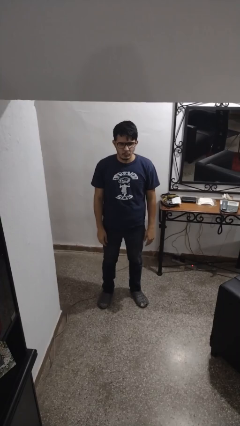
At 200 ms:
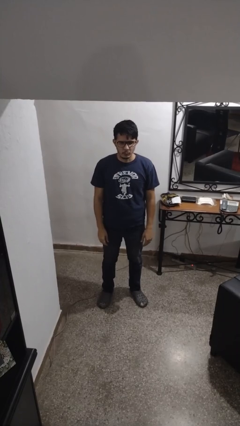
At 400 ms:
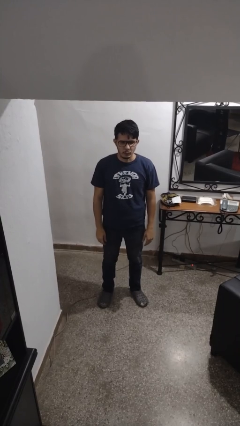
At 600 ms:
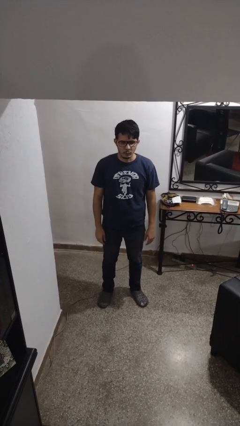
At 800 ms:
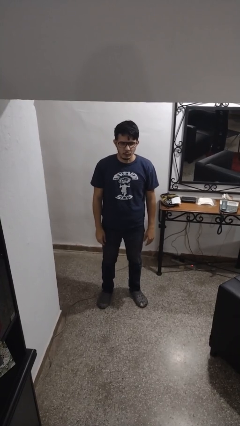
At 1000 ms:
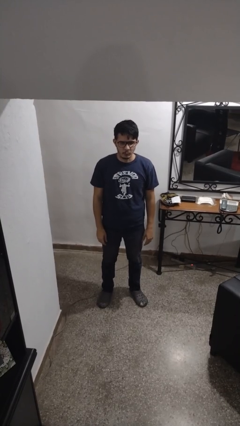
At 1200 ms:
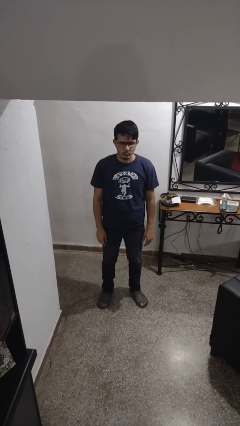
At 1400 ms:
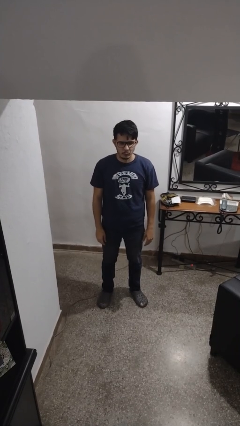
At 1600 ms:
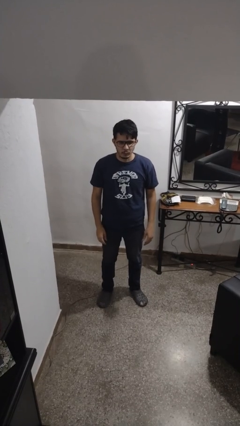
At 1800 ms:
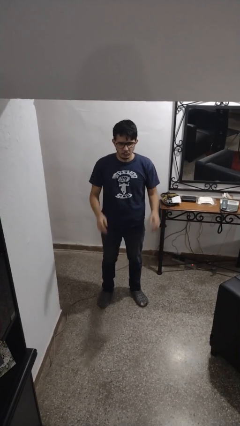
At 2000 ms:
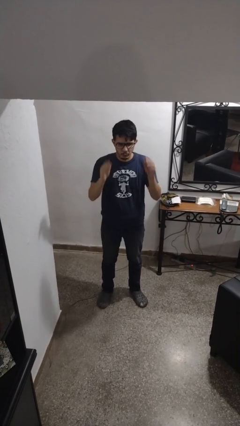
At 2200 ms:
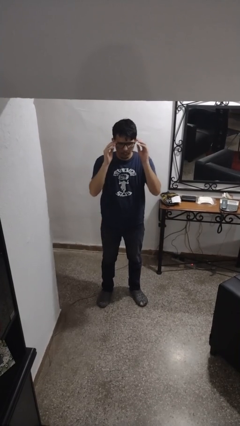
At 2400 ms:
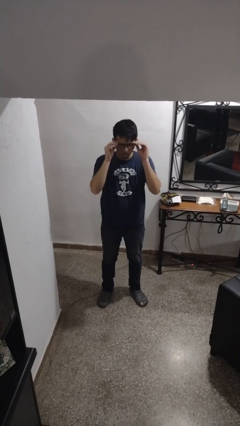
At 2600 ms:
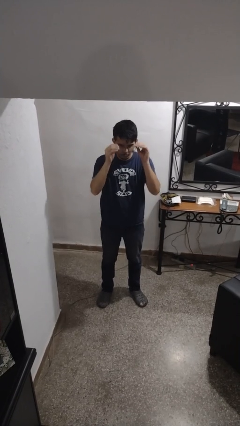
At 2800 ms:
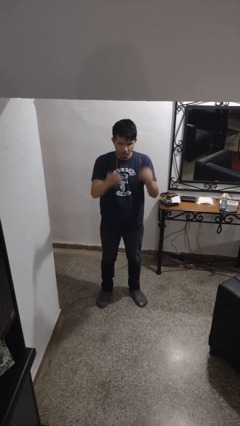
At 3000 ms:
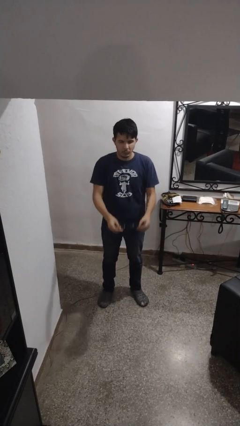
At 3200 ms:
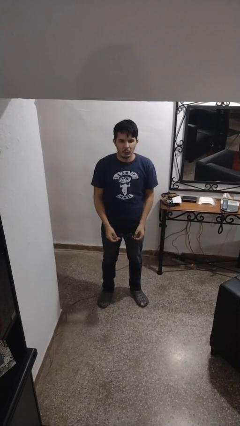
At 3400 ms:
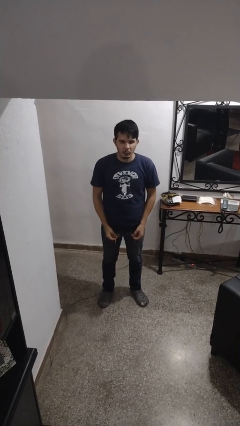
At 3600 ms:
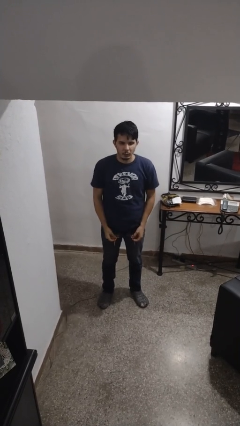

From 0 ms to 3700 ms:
person takes off glasses

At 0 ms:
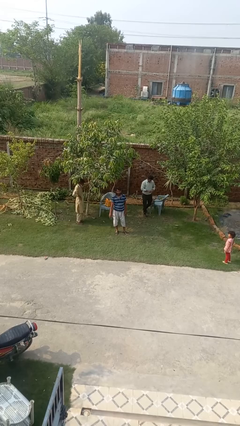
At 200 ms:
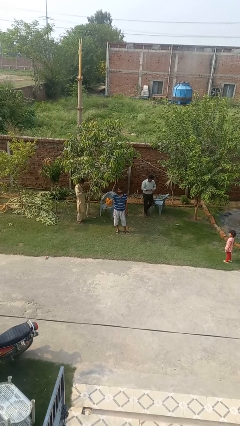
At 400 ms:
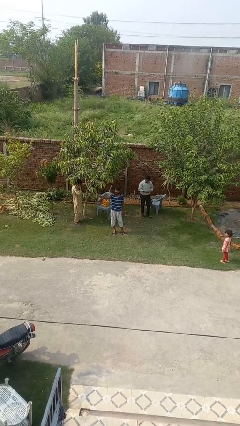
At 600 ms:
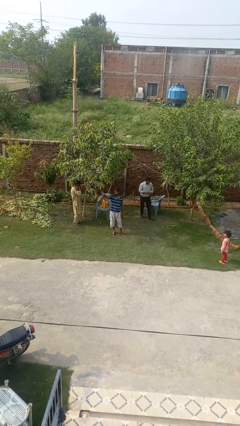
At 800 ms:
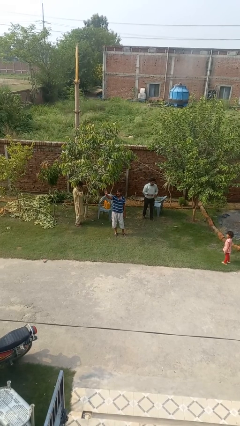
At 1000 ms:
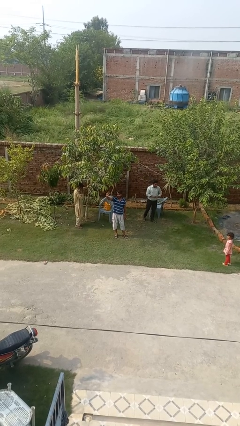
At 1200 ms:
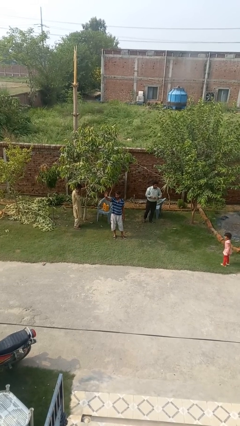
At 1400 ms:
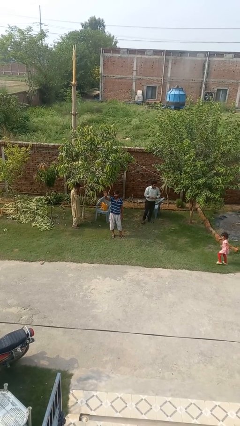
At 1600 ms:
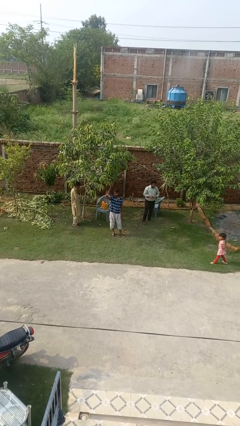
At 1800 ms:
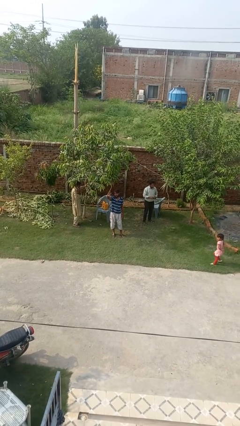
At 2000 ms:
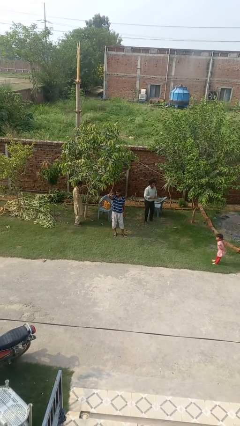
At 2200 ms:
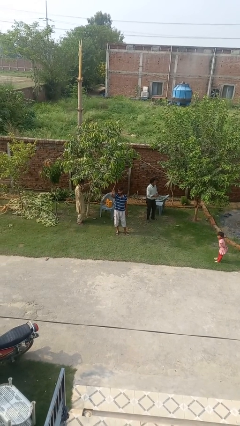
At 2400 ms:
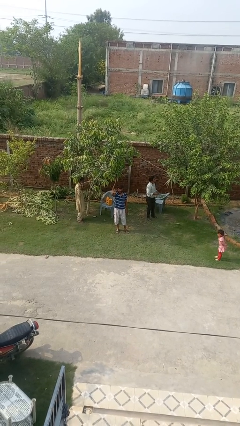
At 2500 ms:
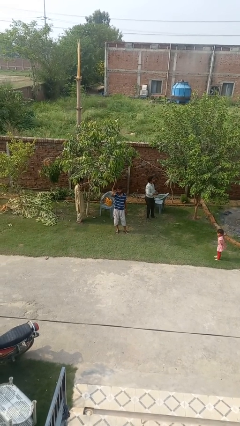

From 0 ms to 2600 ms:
person waves at person

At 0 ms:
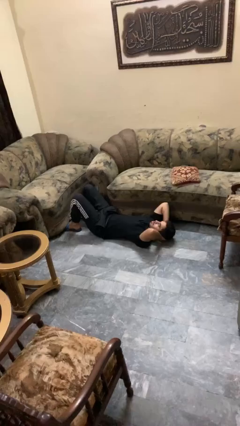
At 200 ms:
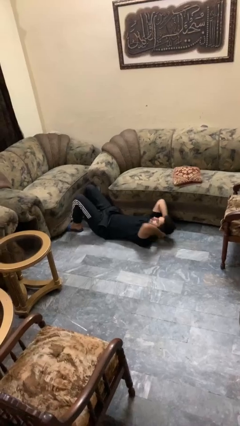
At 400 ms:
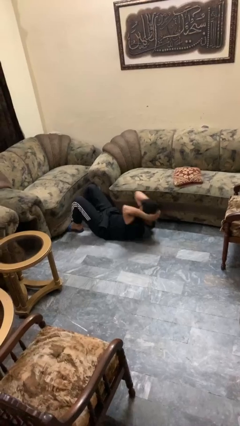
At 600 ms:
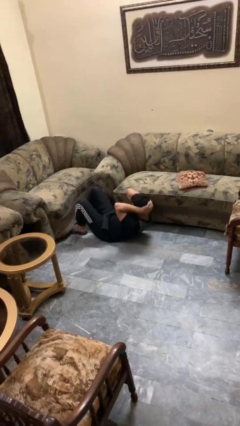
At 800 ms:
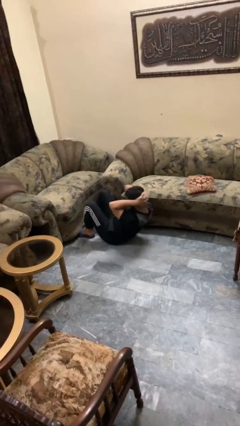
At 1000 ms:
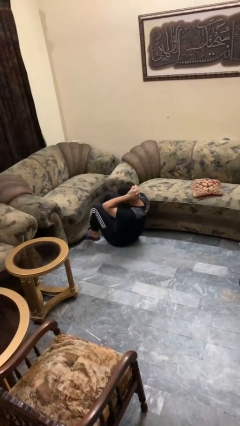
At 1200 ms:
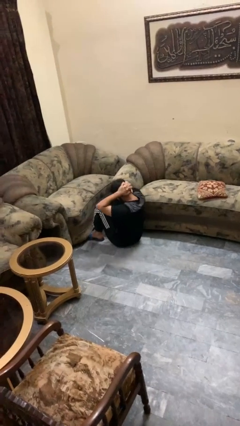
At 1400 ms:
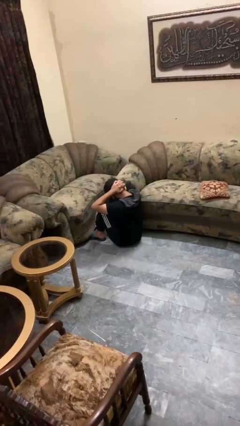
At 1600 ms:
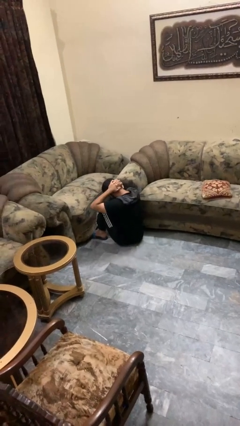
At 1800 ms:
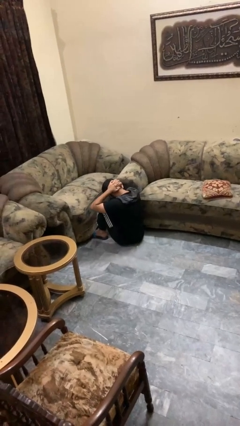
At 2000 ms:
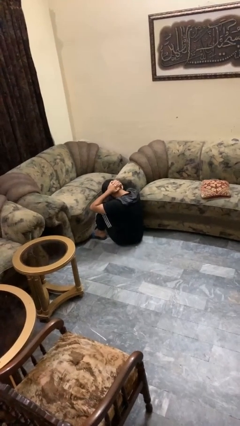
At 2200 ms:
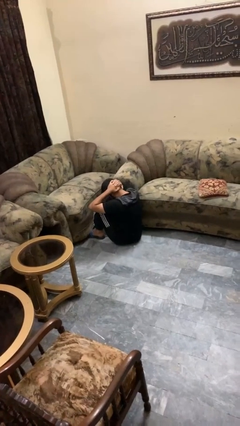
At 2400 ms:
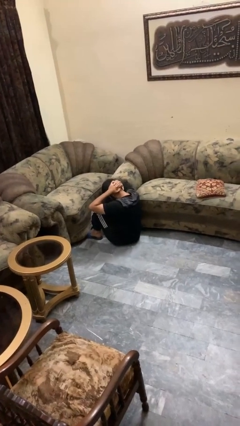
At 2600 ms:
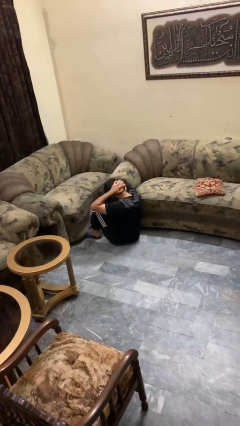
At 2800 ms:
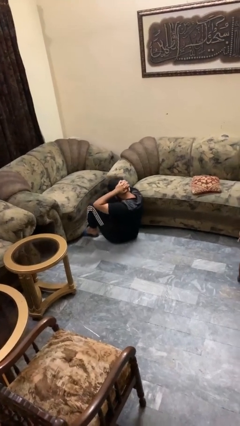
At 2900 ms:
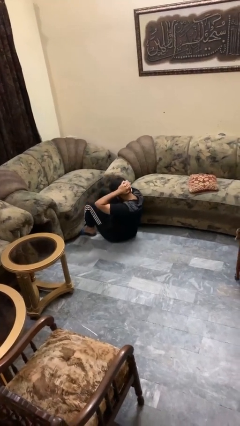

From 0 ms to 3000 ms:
person exercises with situp

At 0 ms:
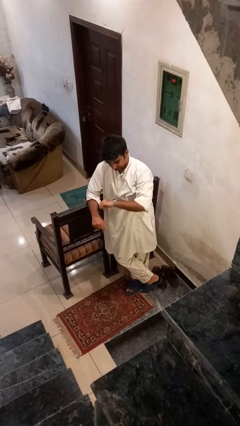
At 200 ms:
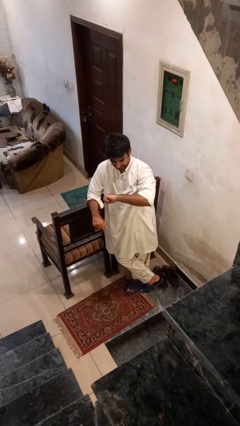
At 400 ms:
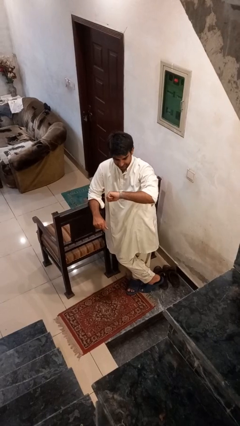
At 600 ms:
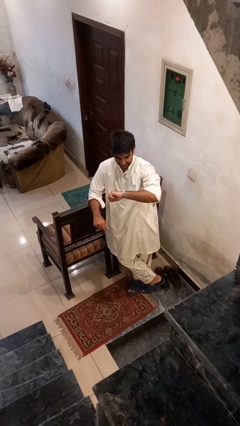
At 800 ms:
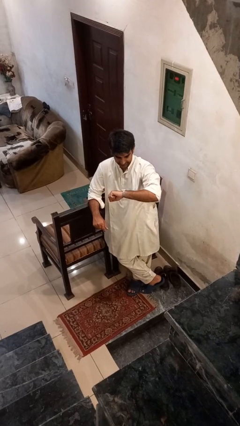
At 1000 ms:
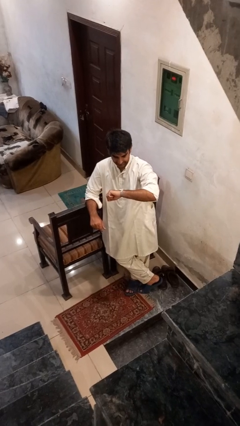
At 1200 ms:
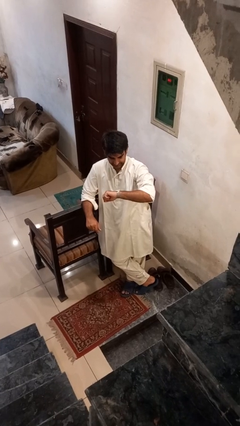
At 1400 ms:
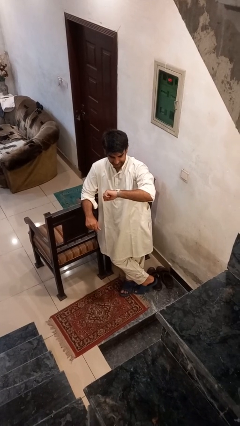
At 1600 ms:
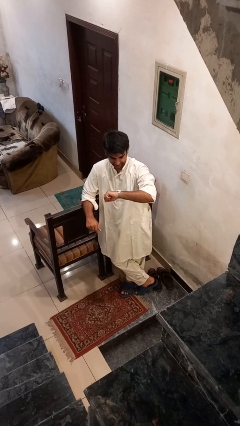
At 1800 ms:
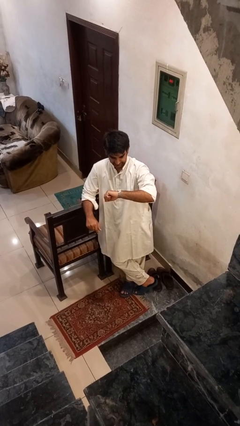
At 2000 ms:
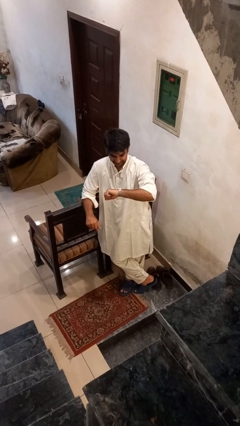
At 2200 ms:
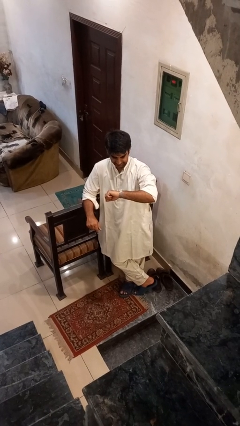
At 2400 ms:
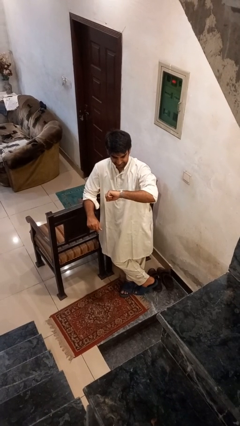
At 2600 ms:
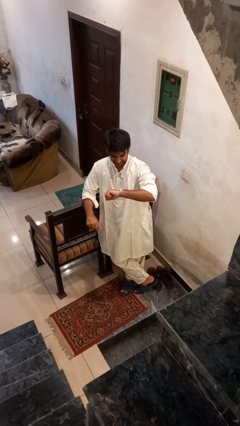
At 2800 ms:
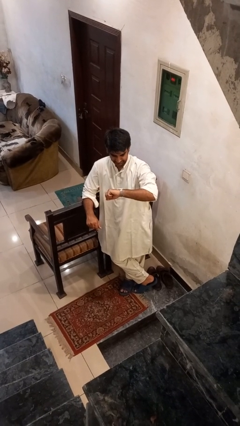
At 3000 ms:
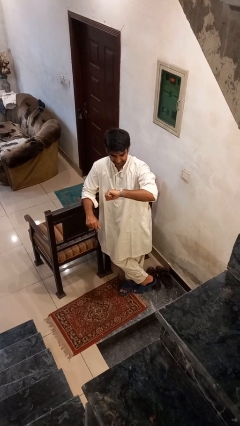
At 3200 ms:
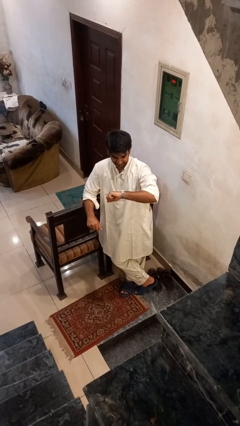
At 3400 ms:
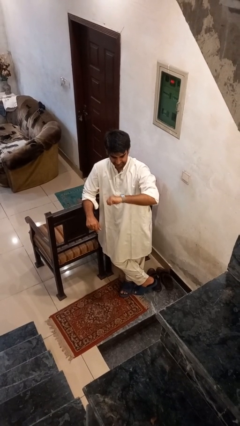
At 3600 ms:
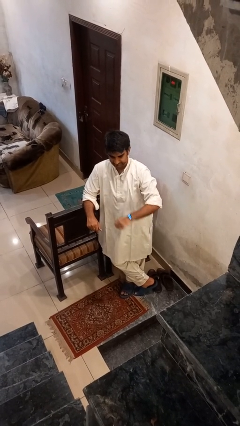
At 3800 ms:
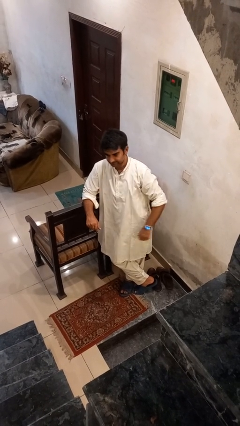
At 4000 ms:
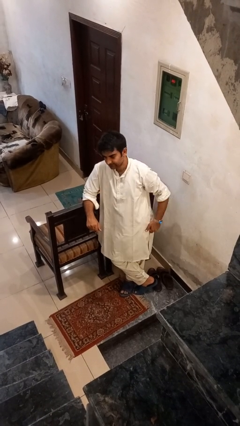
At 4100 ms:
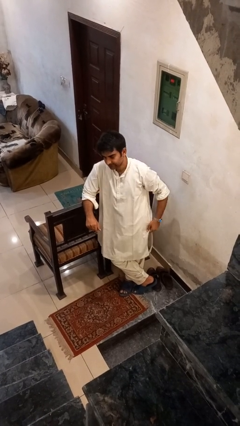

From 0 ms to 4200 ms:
person looks at wristwatch

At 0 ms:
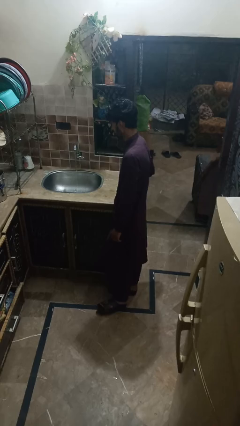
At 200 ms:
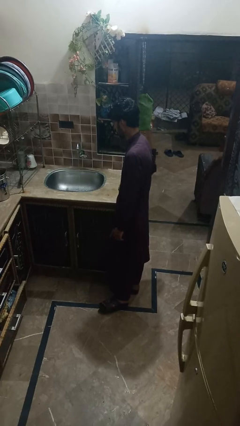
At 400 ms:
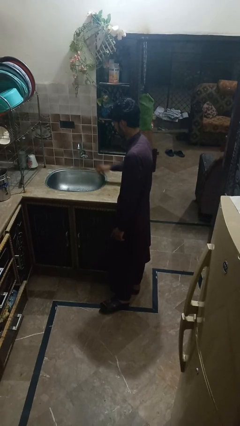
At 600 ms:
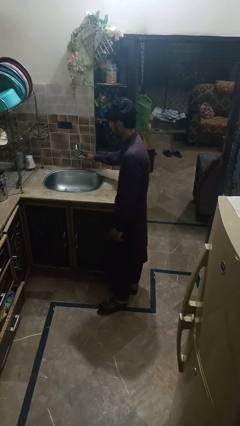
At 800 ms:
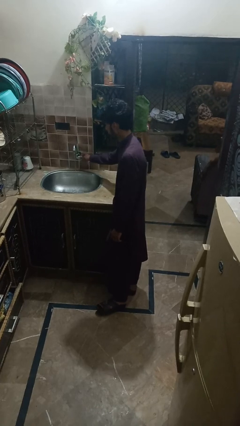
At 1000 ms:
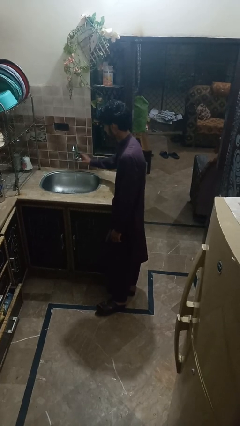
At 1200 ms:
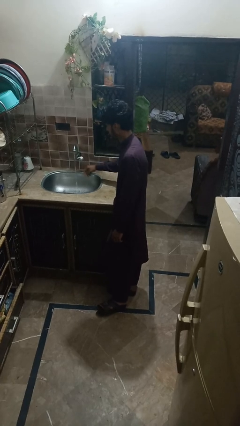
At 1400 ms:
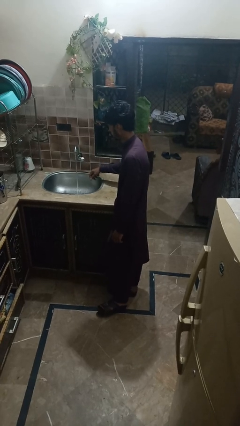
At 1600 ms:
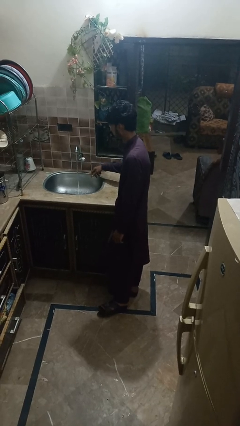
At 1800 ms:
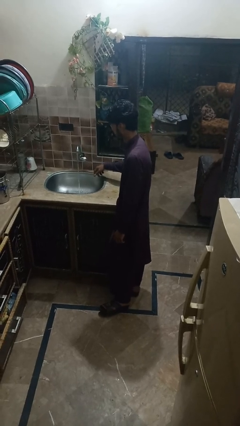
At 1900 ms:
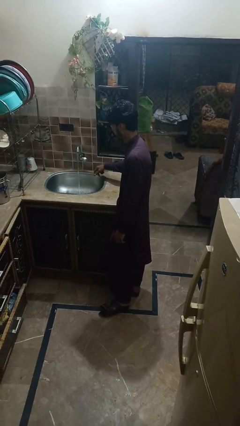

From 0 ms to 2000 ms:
person opens dishwasher

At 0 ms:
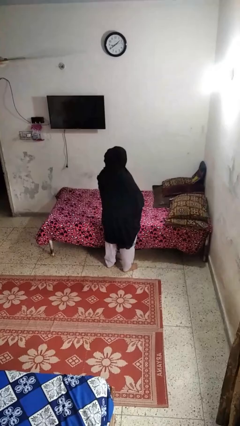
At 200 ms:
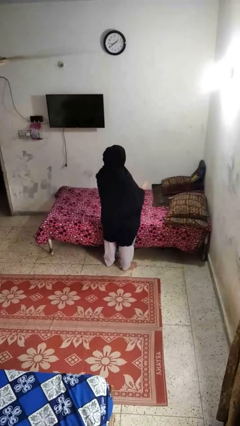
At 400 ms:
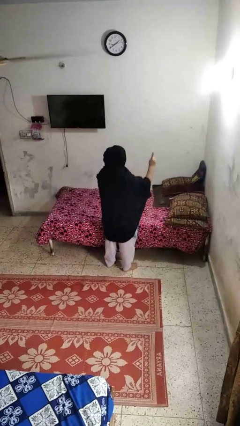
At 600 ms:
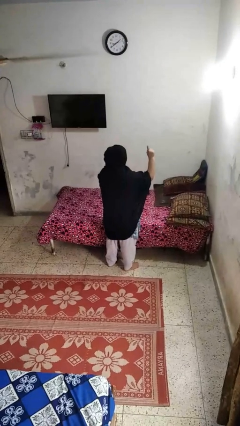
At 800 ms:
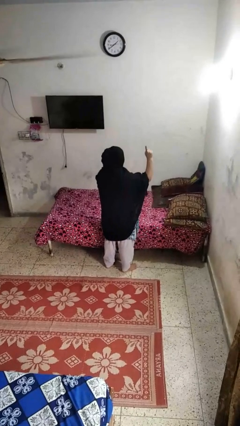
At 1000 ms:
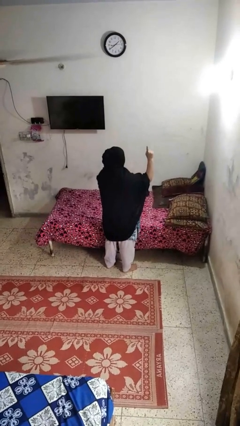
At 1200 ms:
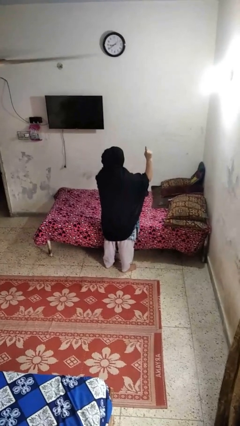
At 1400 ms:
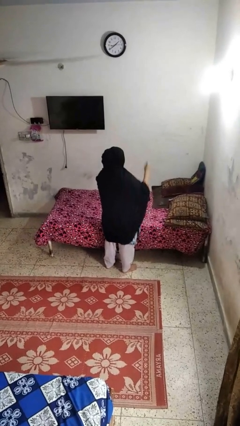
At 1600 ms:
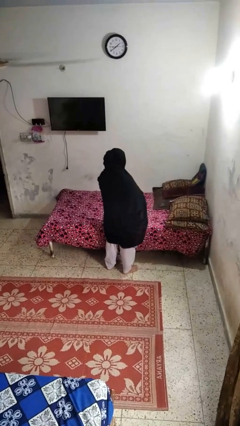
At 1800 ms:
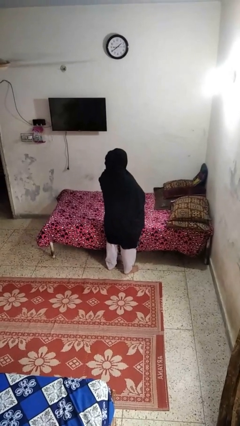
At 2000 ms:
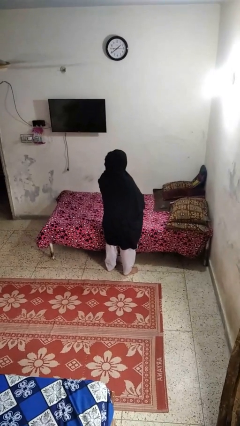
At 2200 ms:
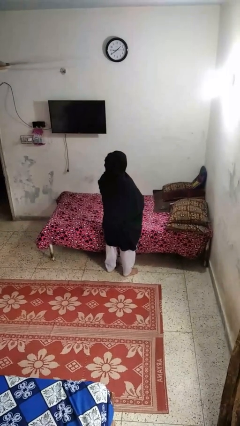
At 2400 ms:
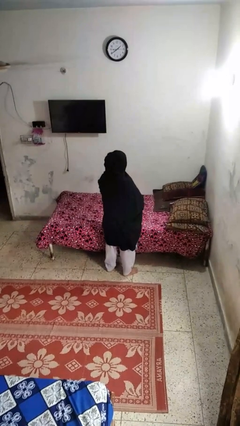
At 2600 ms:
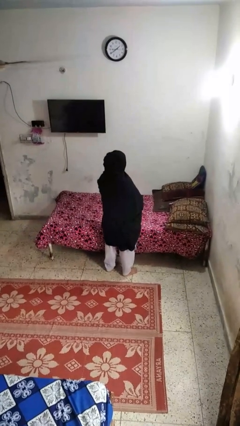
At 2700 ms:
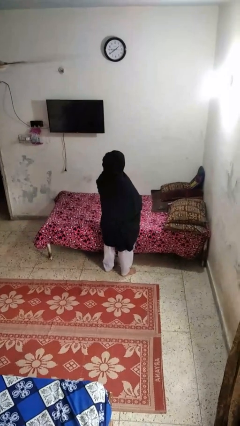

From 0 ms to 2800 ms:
person gestures number one
